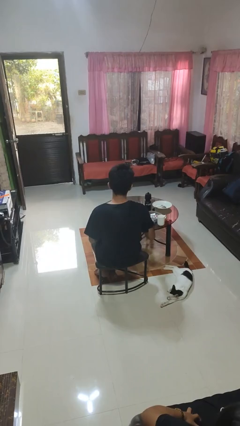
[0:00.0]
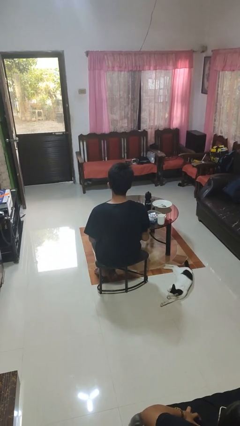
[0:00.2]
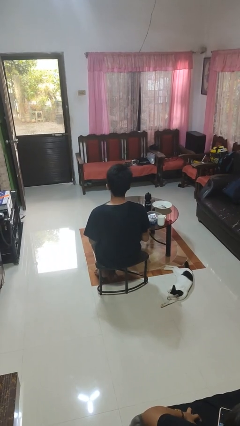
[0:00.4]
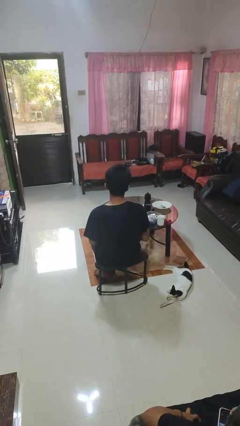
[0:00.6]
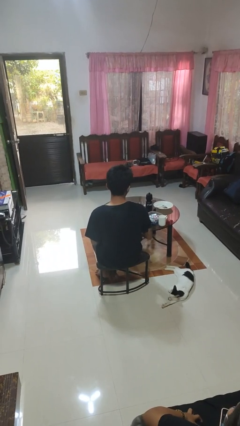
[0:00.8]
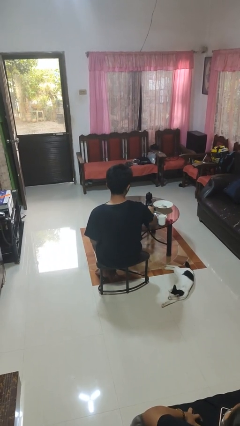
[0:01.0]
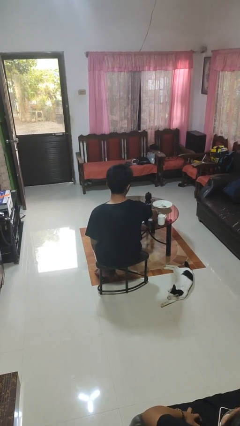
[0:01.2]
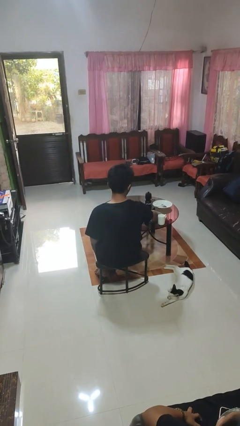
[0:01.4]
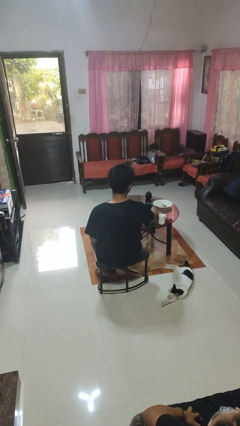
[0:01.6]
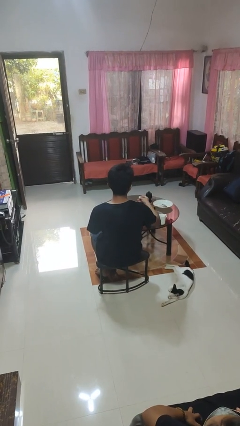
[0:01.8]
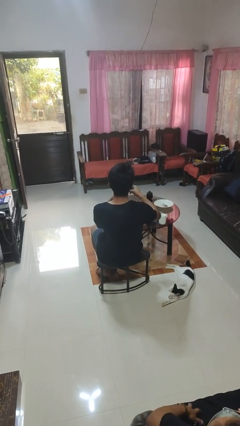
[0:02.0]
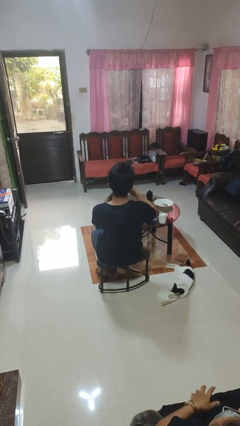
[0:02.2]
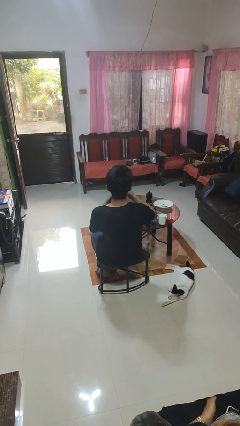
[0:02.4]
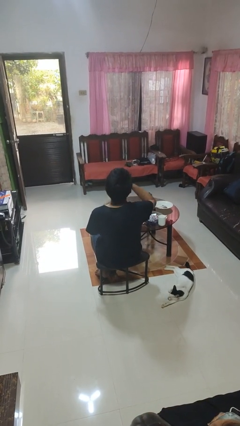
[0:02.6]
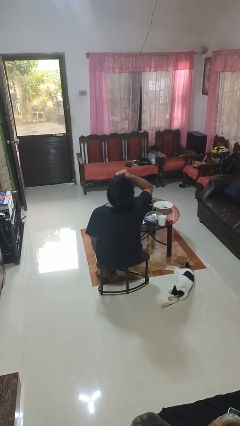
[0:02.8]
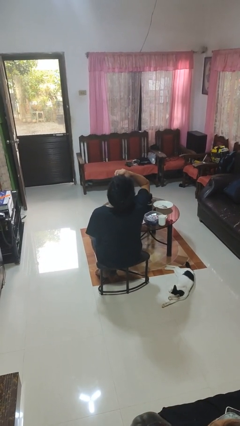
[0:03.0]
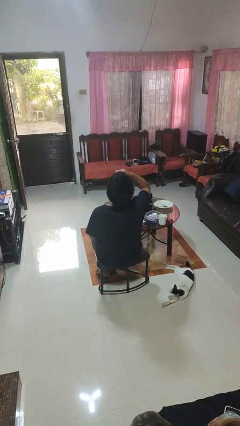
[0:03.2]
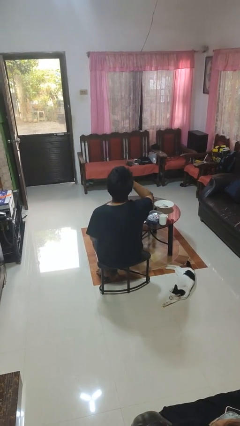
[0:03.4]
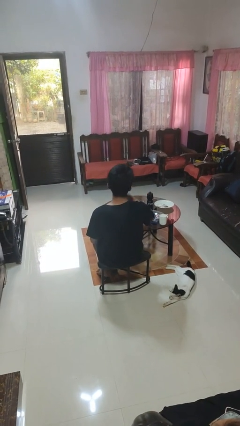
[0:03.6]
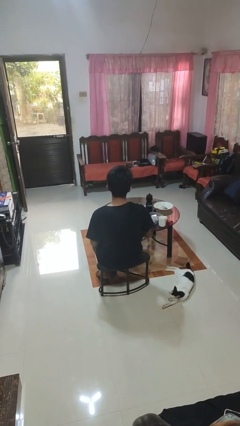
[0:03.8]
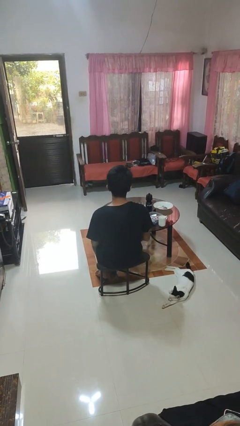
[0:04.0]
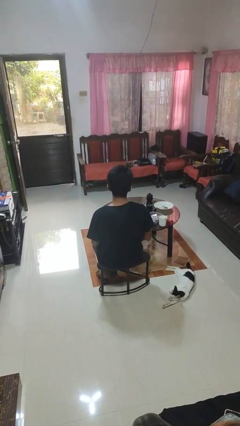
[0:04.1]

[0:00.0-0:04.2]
person takes medicine pills

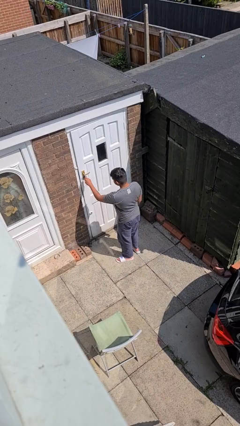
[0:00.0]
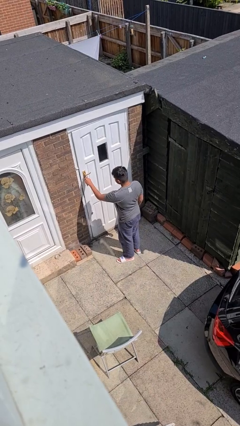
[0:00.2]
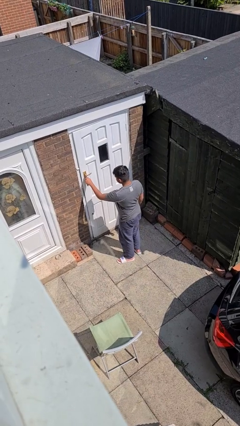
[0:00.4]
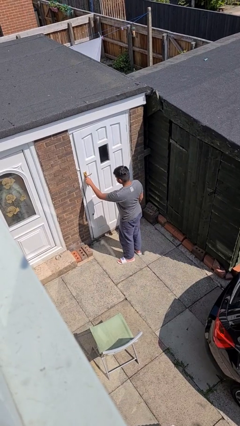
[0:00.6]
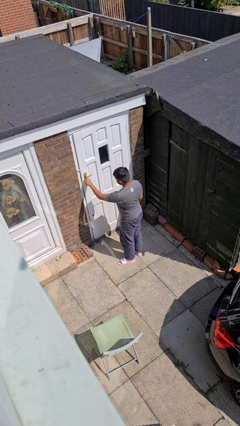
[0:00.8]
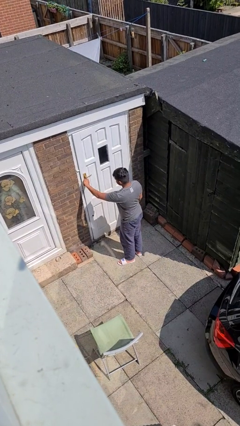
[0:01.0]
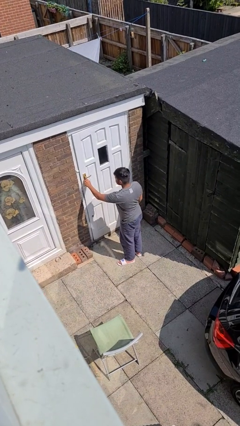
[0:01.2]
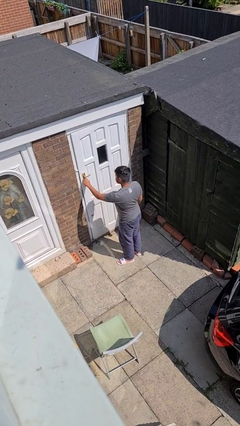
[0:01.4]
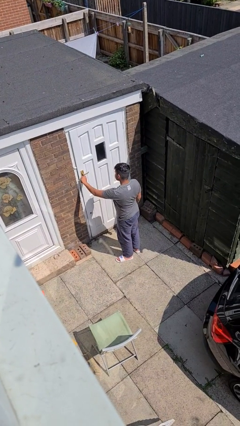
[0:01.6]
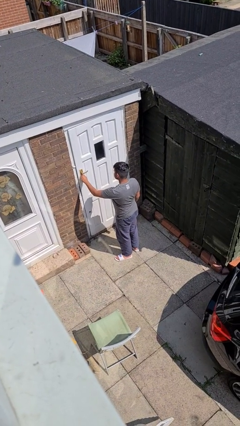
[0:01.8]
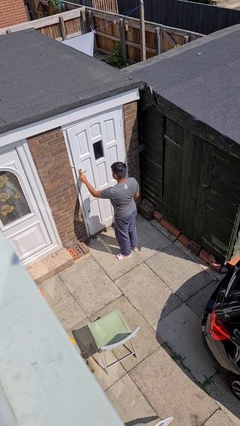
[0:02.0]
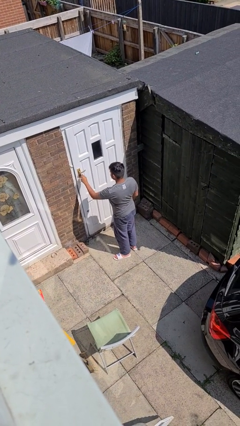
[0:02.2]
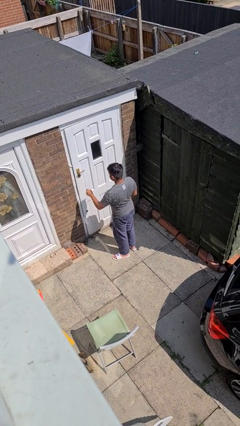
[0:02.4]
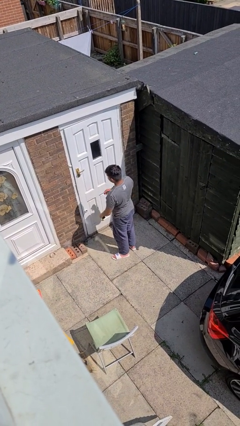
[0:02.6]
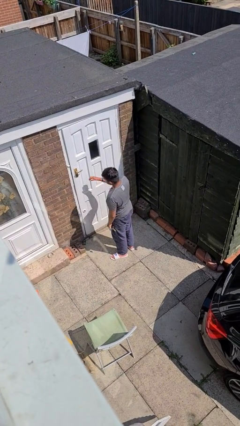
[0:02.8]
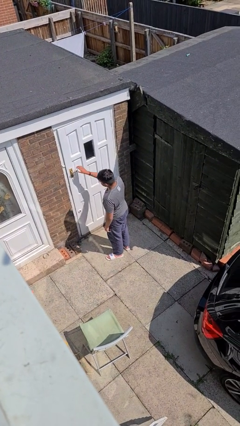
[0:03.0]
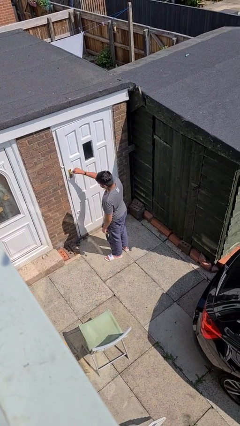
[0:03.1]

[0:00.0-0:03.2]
person unlocks door with keys

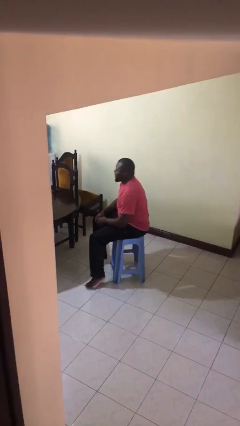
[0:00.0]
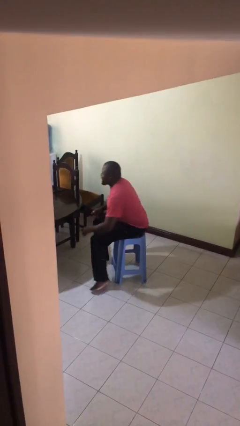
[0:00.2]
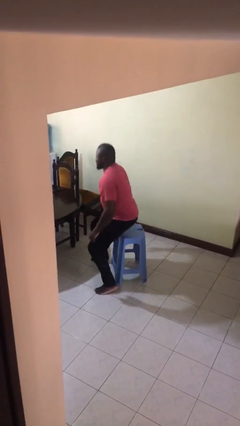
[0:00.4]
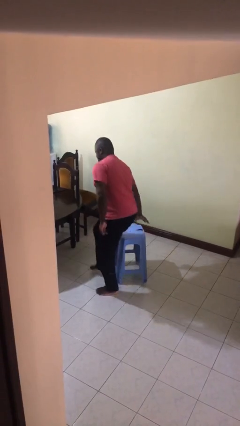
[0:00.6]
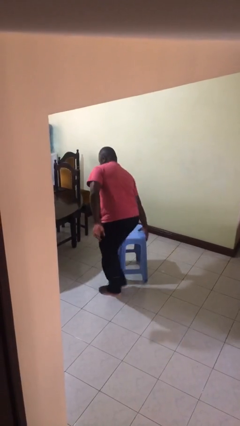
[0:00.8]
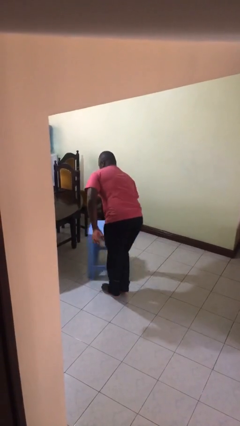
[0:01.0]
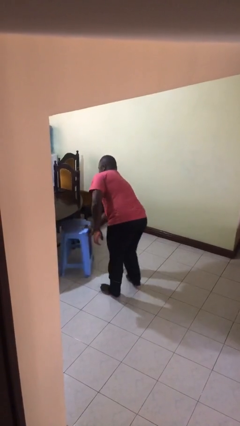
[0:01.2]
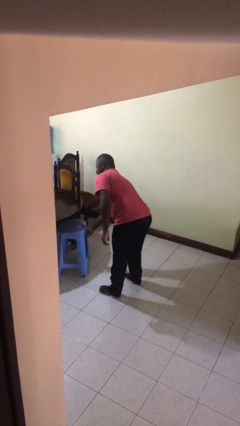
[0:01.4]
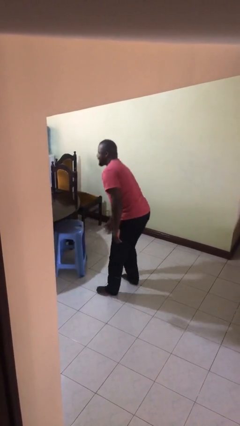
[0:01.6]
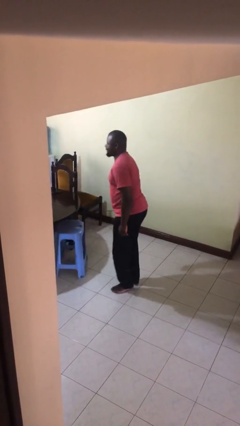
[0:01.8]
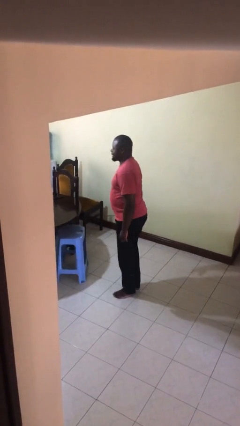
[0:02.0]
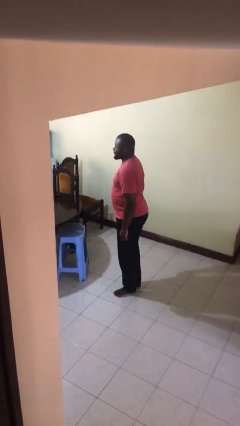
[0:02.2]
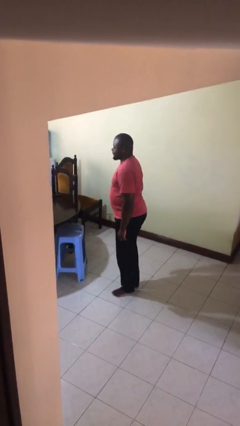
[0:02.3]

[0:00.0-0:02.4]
person stands up

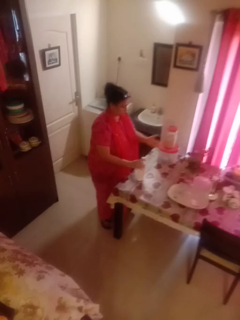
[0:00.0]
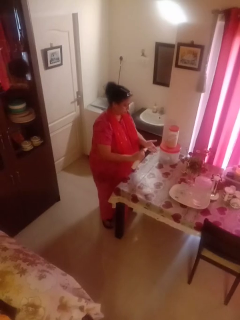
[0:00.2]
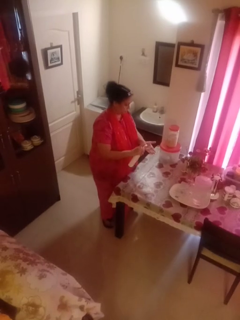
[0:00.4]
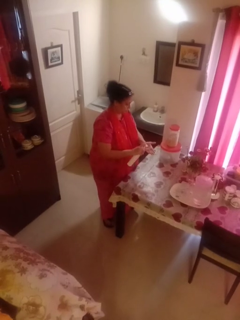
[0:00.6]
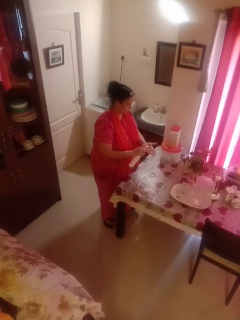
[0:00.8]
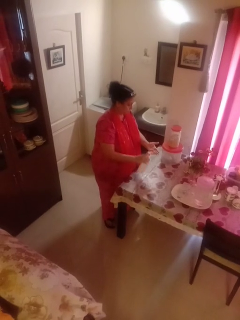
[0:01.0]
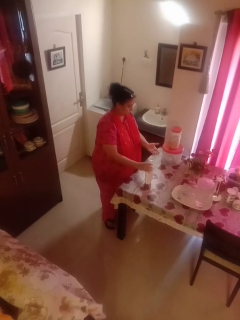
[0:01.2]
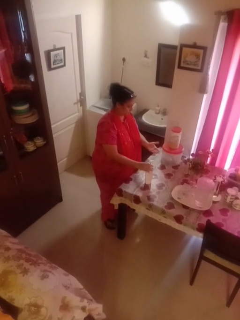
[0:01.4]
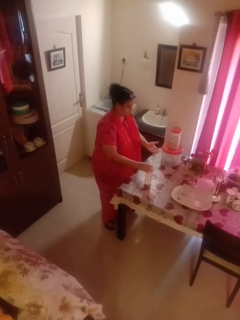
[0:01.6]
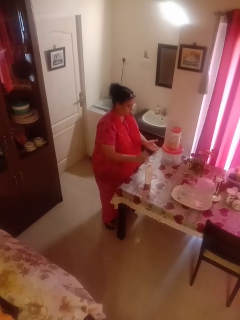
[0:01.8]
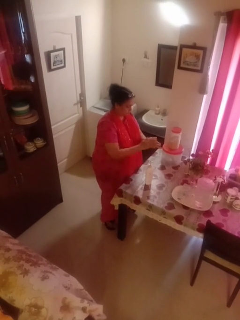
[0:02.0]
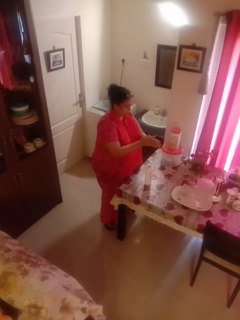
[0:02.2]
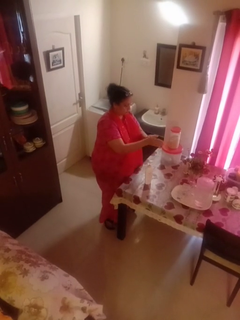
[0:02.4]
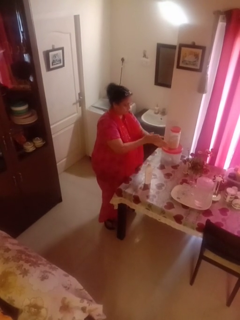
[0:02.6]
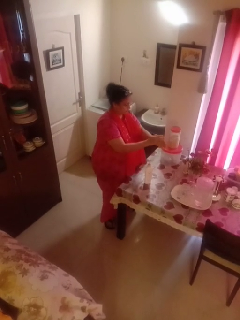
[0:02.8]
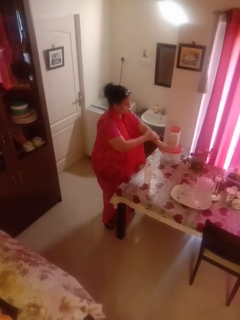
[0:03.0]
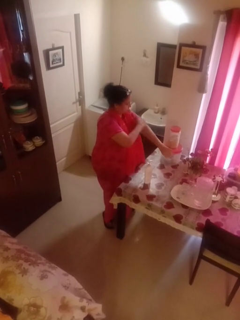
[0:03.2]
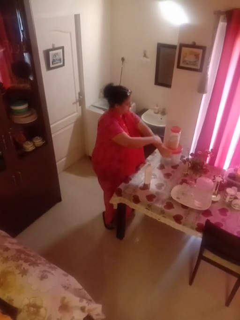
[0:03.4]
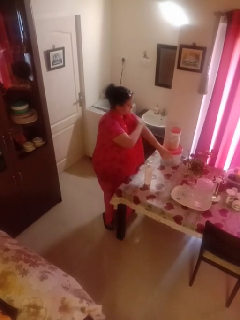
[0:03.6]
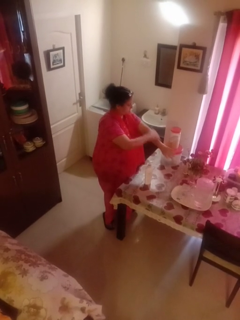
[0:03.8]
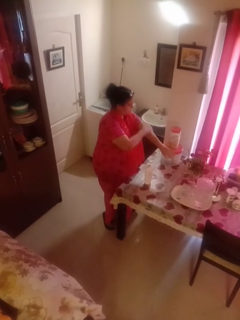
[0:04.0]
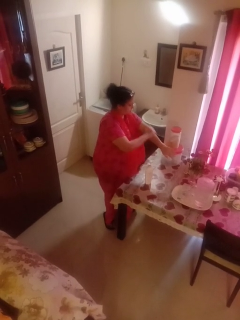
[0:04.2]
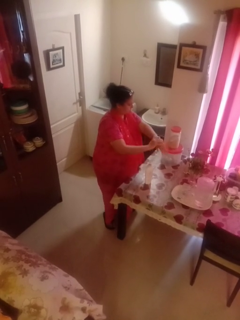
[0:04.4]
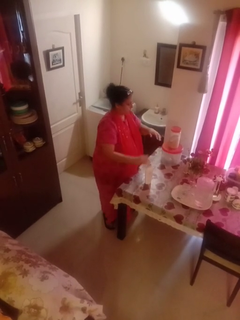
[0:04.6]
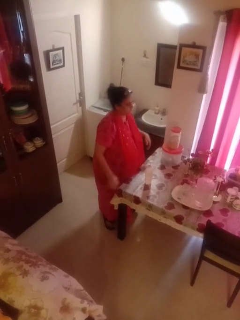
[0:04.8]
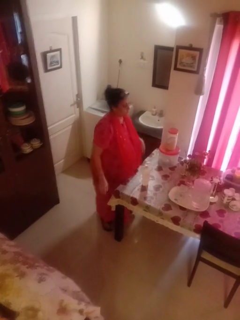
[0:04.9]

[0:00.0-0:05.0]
person applies sunscreen

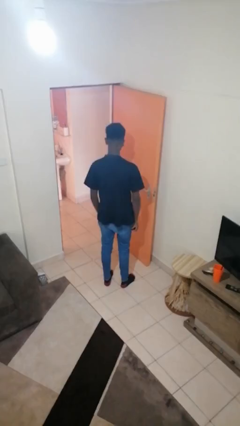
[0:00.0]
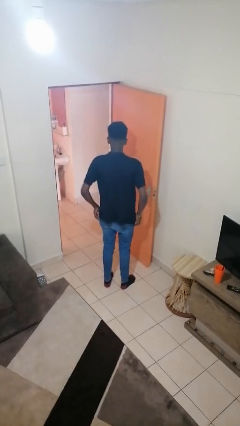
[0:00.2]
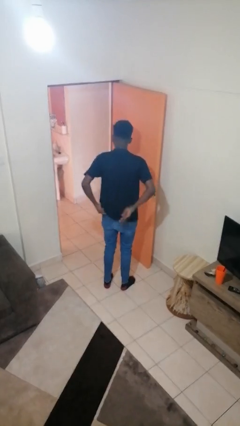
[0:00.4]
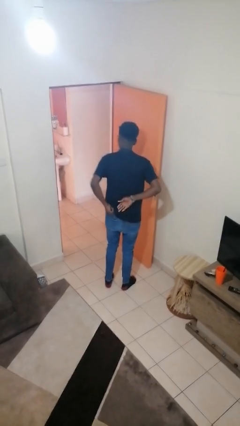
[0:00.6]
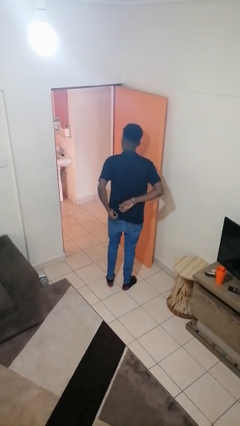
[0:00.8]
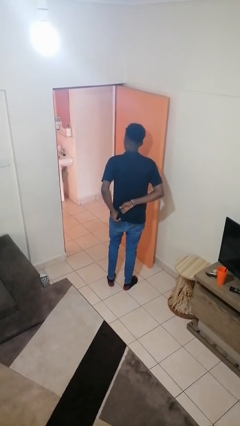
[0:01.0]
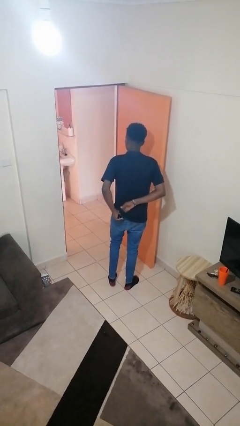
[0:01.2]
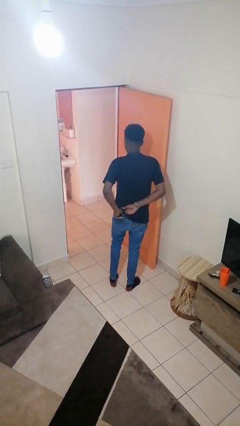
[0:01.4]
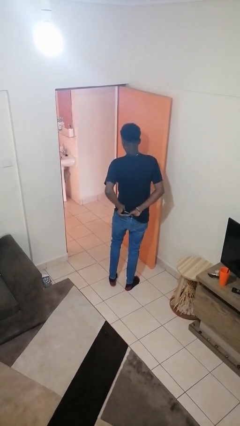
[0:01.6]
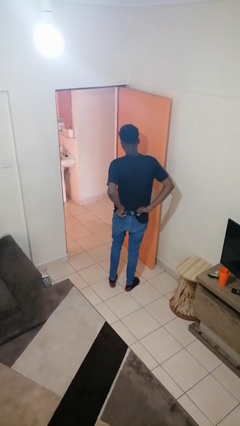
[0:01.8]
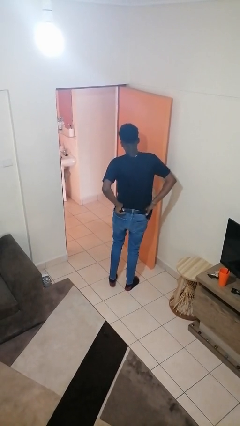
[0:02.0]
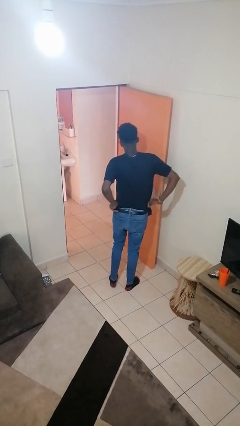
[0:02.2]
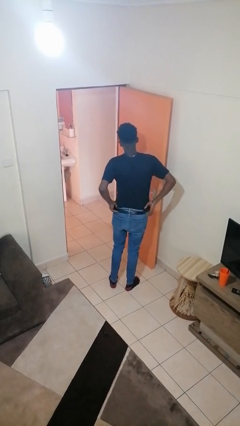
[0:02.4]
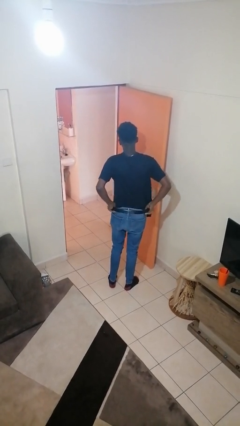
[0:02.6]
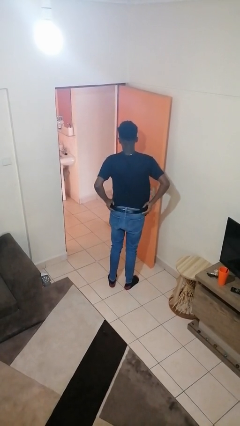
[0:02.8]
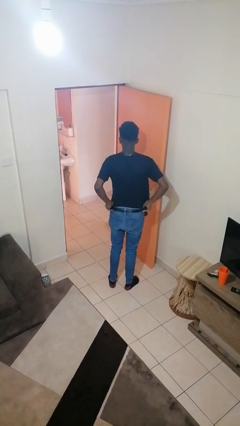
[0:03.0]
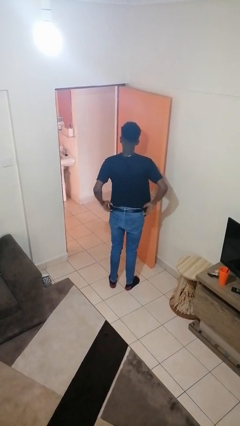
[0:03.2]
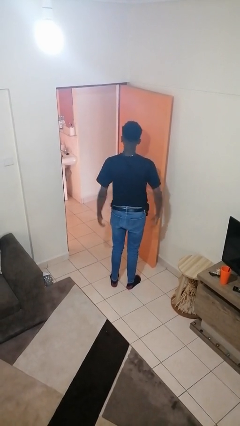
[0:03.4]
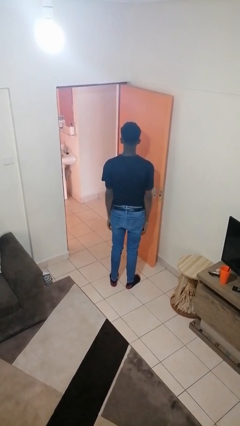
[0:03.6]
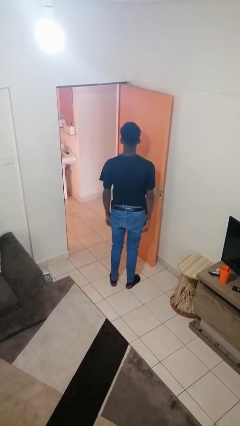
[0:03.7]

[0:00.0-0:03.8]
person tucks in shirt
